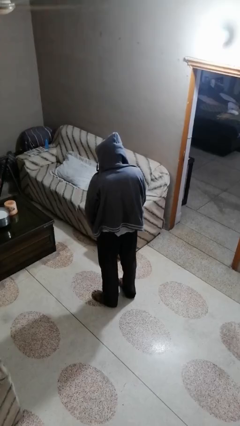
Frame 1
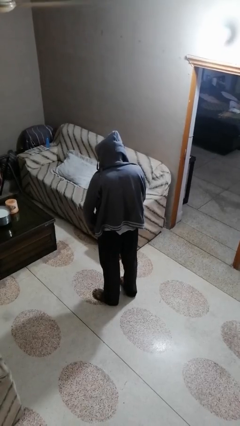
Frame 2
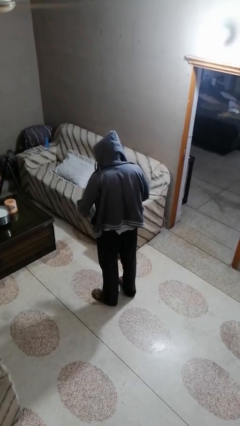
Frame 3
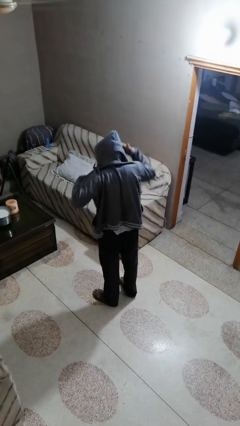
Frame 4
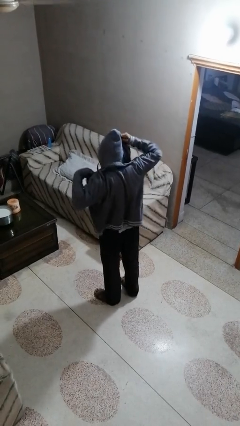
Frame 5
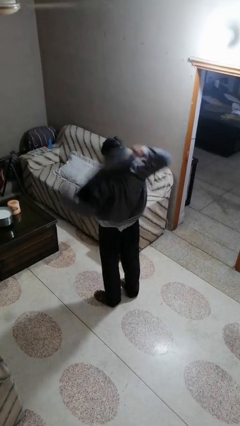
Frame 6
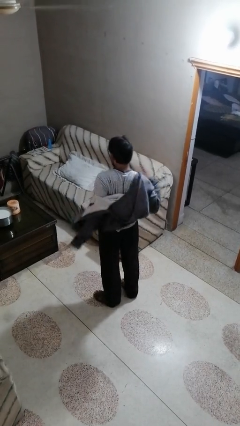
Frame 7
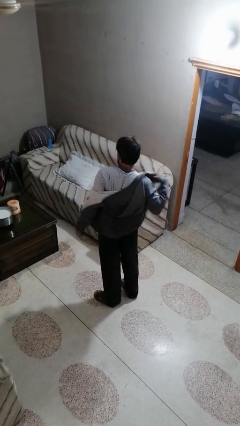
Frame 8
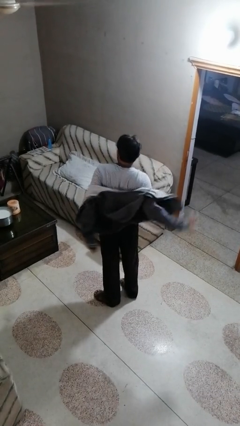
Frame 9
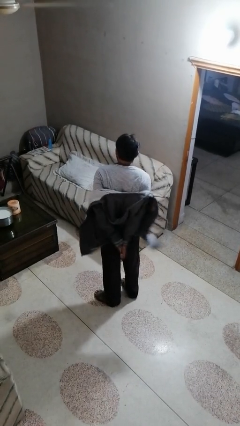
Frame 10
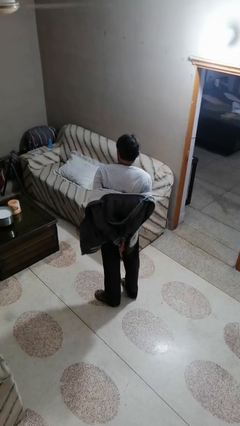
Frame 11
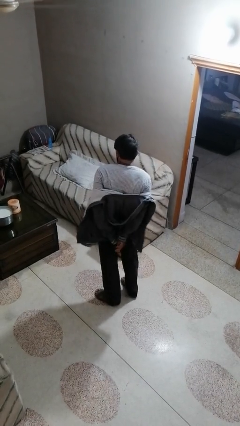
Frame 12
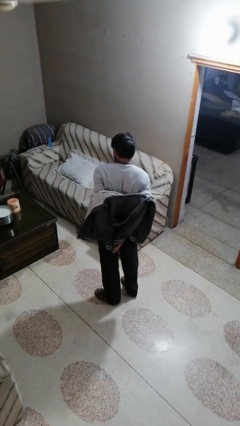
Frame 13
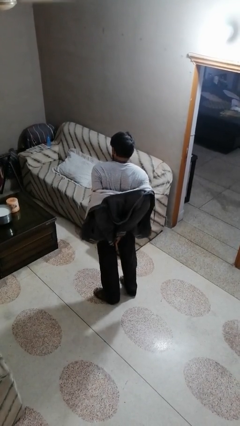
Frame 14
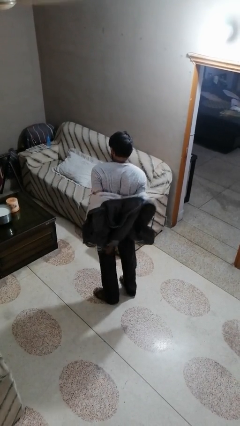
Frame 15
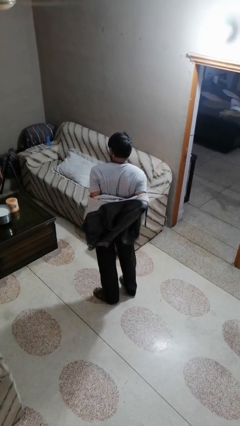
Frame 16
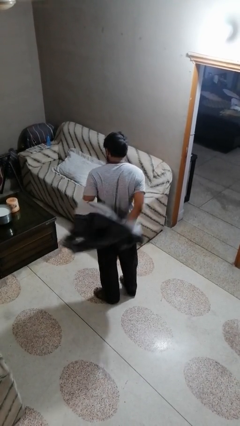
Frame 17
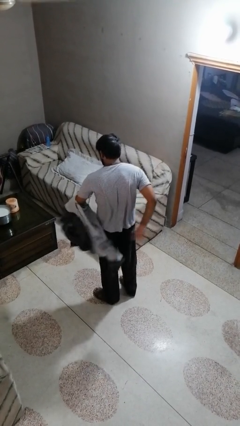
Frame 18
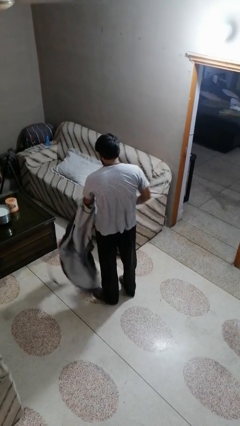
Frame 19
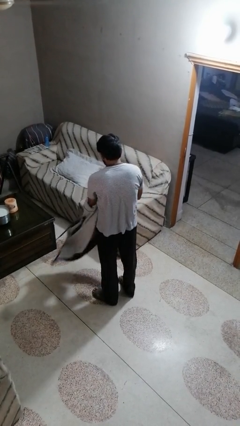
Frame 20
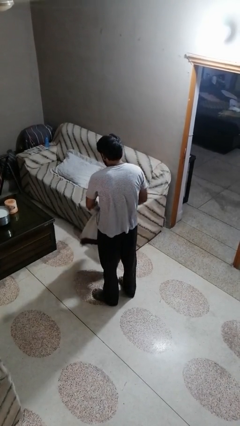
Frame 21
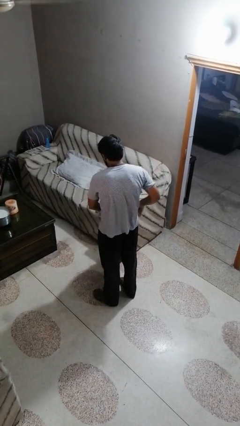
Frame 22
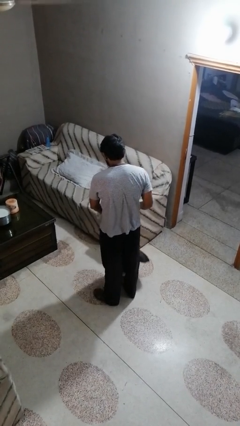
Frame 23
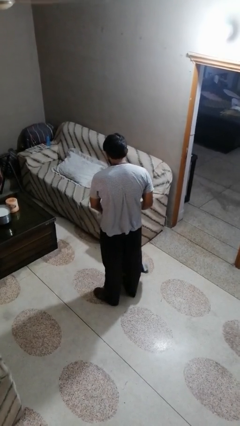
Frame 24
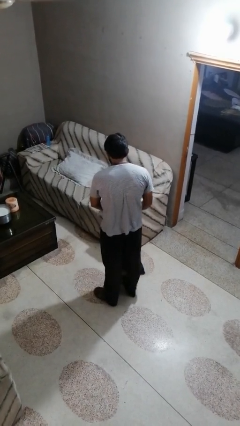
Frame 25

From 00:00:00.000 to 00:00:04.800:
person takes off hoodie

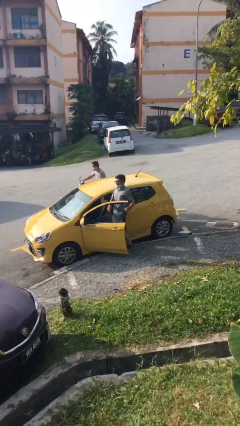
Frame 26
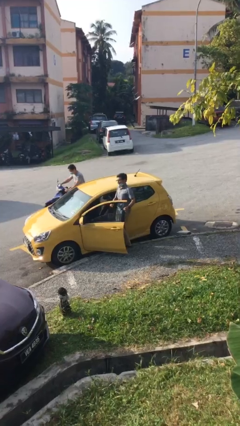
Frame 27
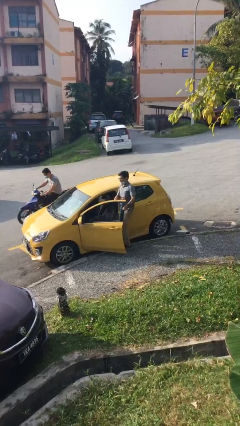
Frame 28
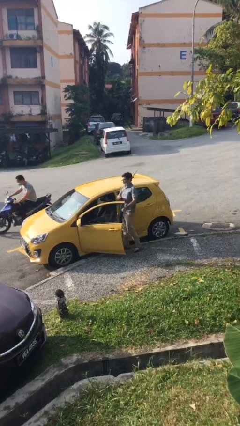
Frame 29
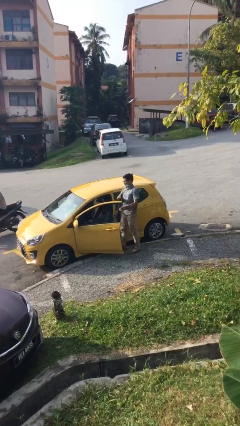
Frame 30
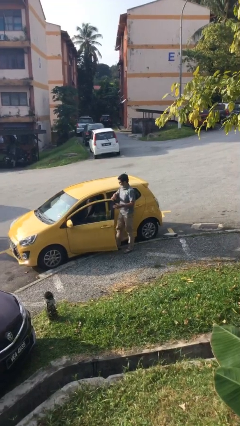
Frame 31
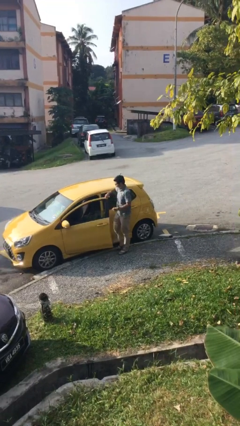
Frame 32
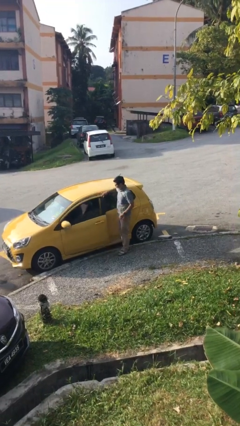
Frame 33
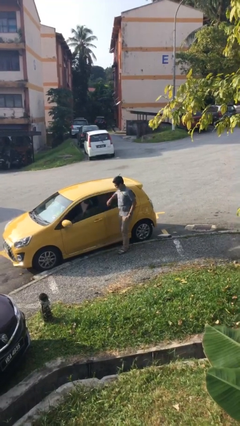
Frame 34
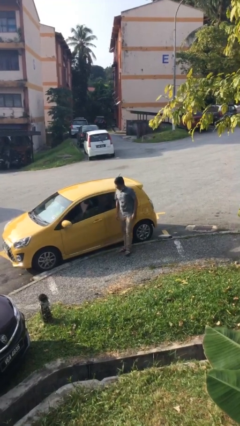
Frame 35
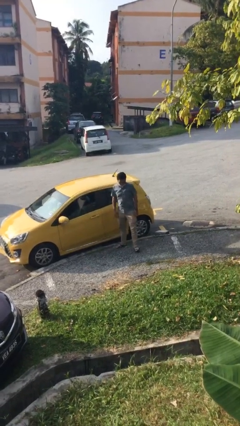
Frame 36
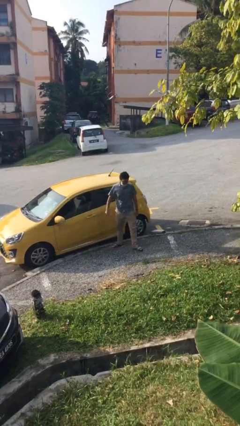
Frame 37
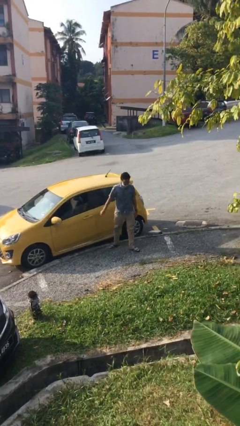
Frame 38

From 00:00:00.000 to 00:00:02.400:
person closes car door

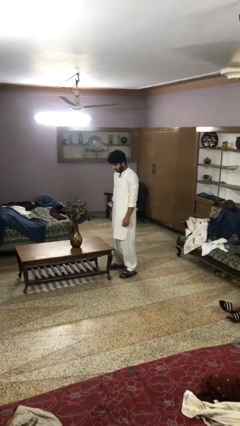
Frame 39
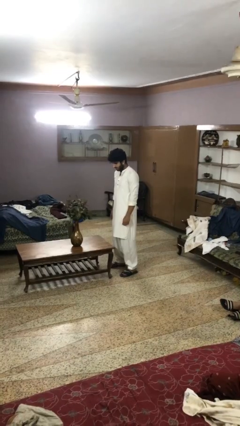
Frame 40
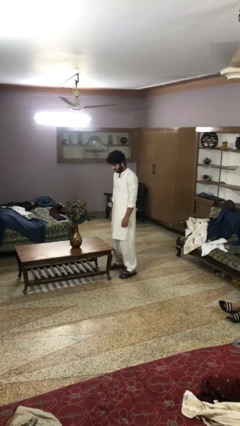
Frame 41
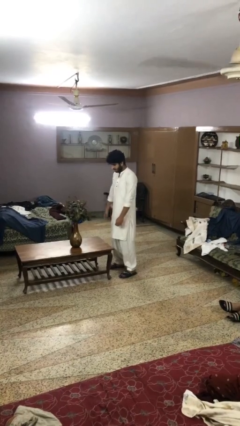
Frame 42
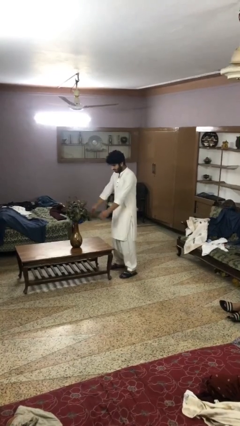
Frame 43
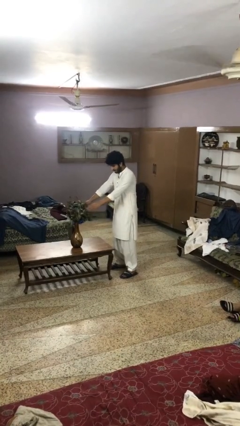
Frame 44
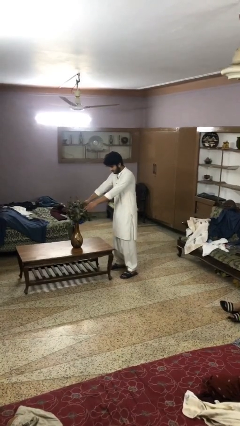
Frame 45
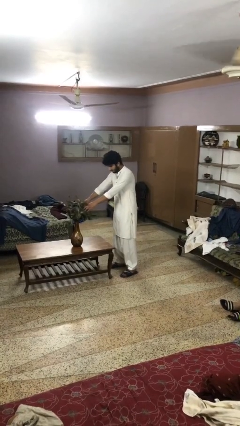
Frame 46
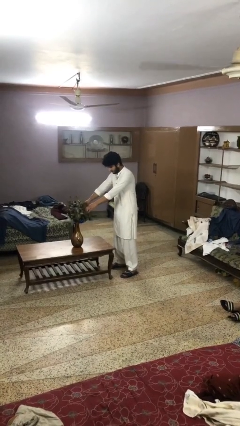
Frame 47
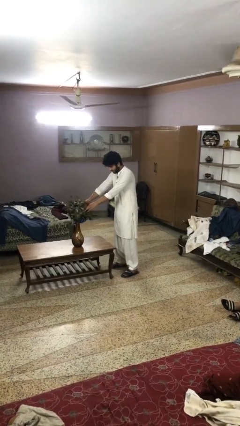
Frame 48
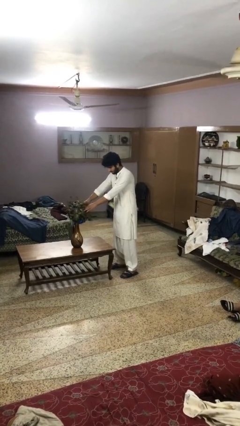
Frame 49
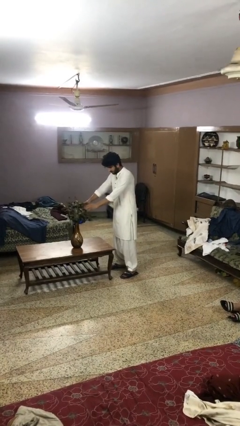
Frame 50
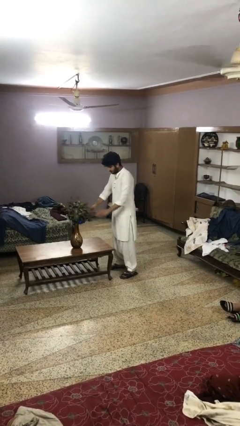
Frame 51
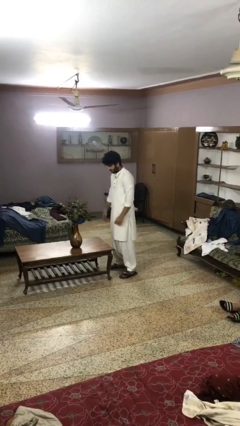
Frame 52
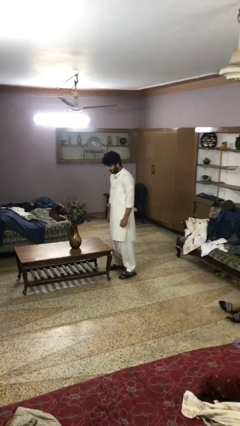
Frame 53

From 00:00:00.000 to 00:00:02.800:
person arranges flowers in vase

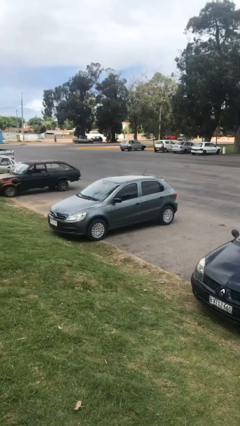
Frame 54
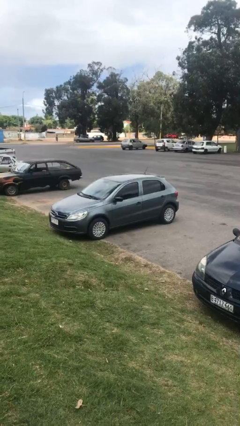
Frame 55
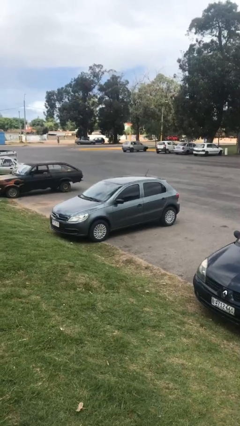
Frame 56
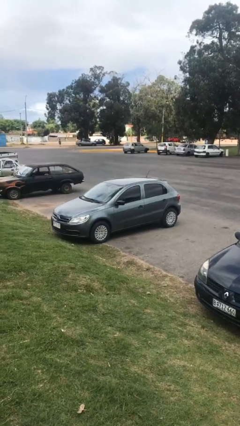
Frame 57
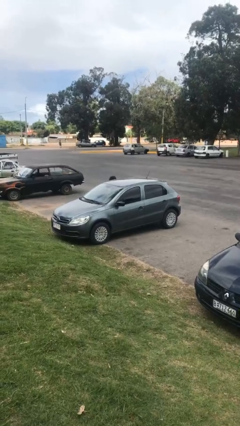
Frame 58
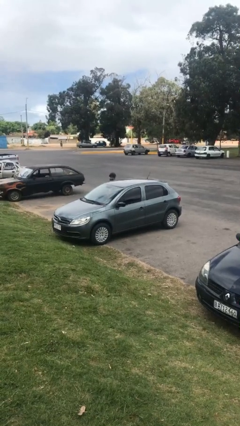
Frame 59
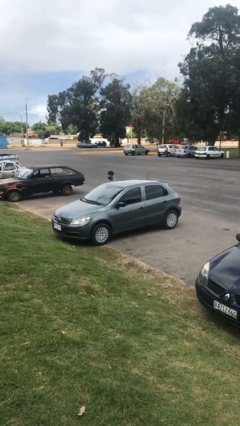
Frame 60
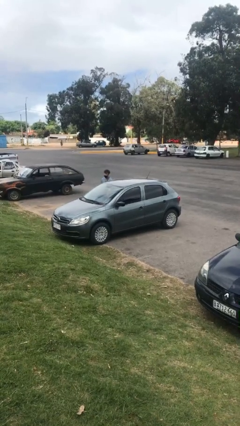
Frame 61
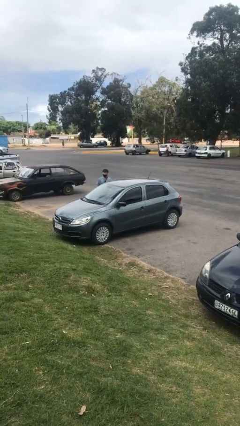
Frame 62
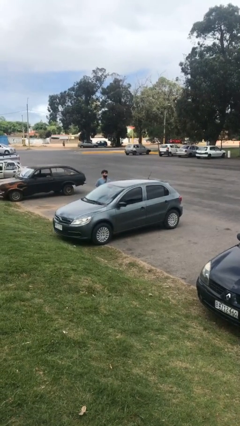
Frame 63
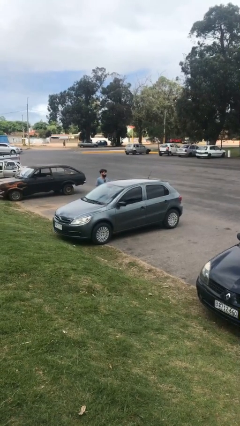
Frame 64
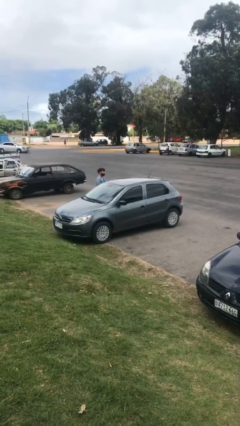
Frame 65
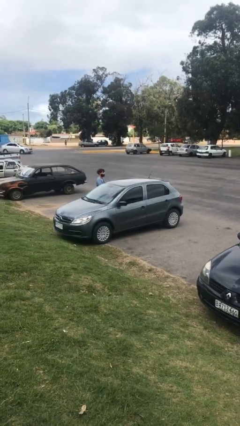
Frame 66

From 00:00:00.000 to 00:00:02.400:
car drops off person

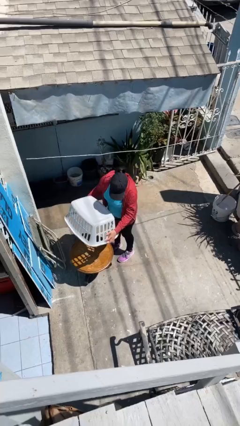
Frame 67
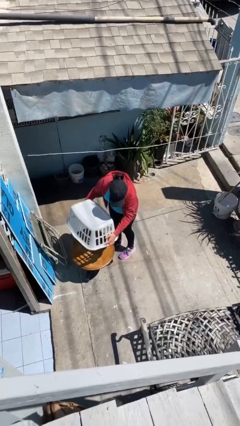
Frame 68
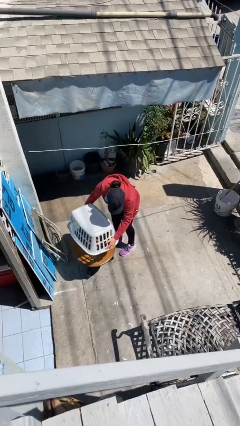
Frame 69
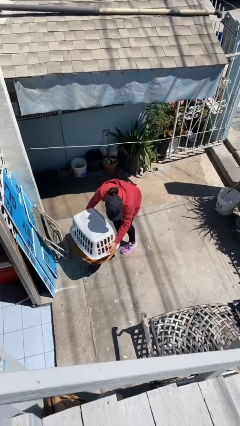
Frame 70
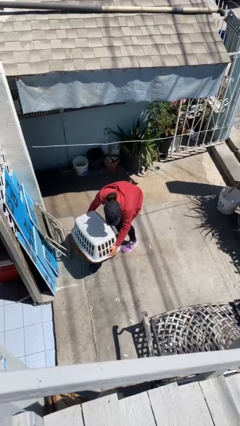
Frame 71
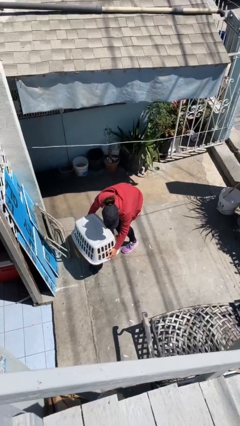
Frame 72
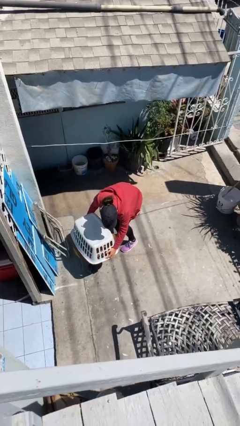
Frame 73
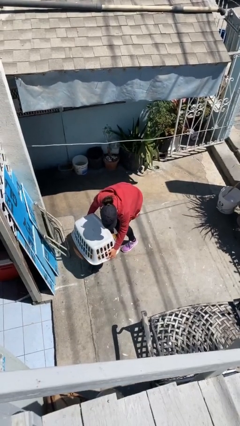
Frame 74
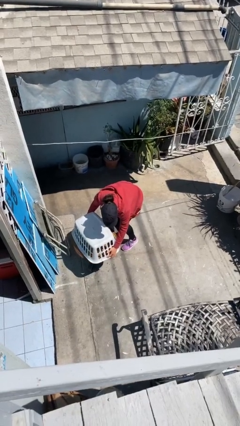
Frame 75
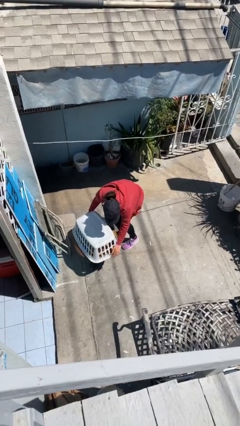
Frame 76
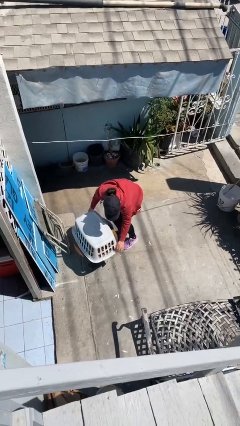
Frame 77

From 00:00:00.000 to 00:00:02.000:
person puts down object on table

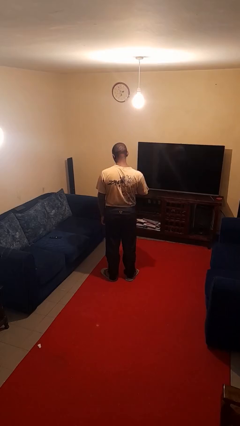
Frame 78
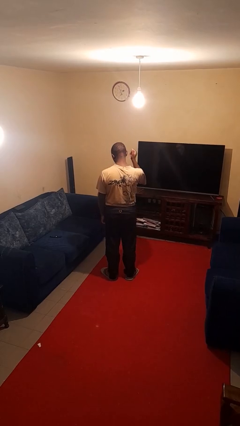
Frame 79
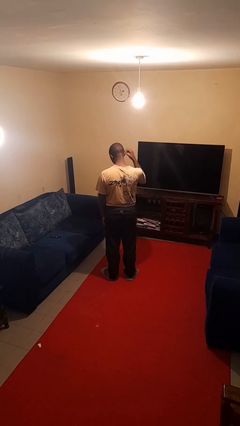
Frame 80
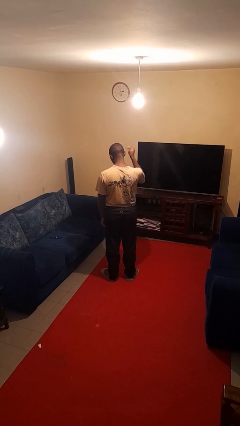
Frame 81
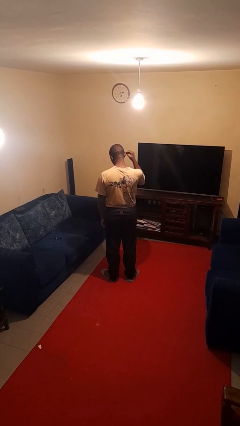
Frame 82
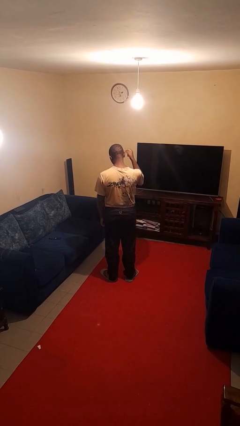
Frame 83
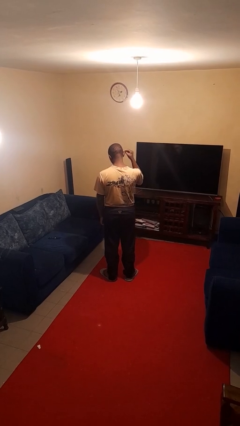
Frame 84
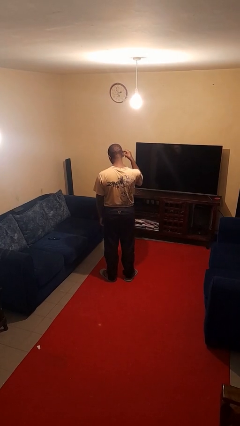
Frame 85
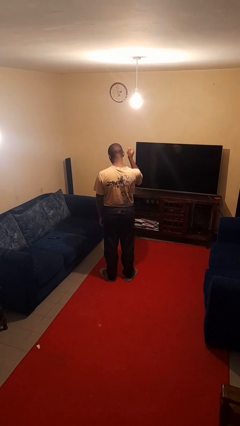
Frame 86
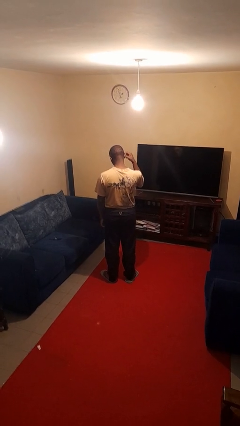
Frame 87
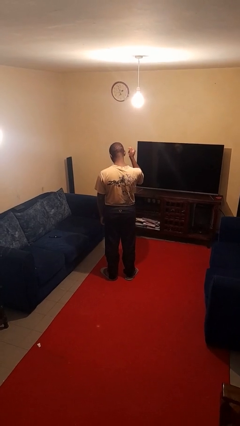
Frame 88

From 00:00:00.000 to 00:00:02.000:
person snaps fingers

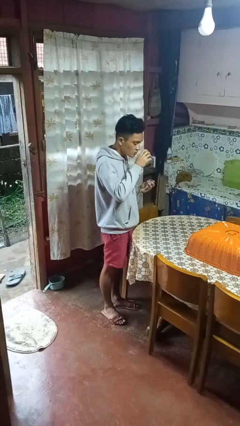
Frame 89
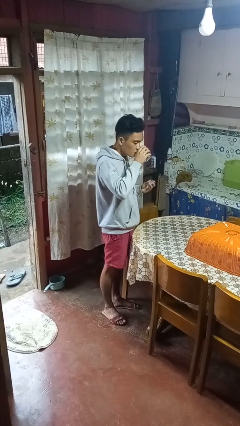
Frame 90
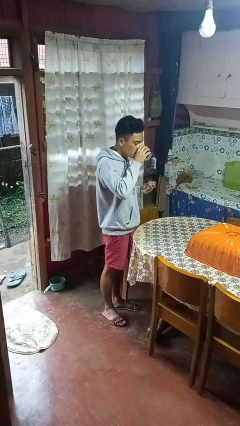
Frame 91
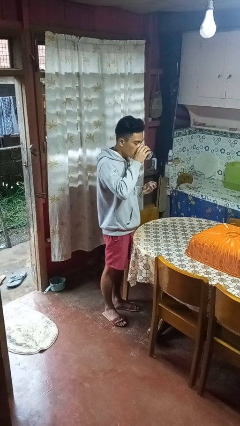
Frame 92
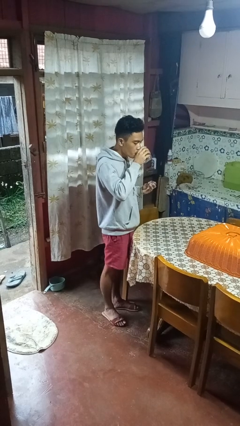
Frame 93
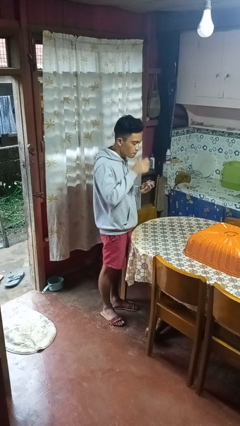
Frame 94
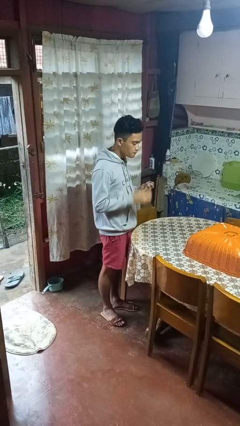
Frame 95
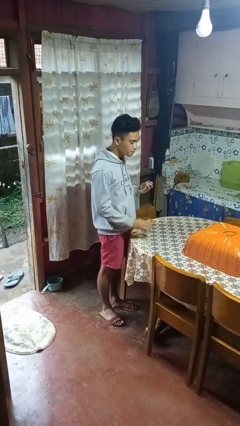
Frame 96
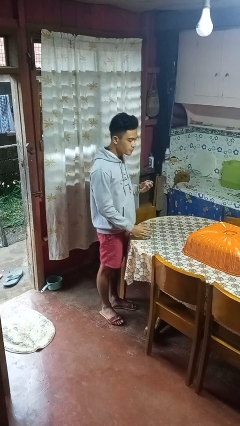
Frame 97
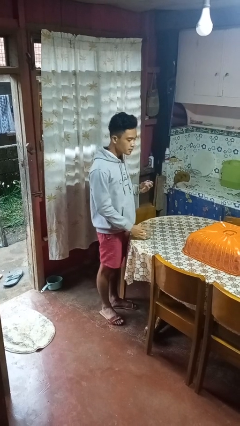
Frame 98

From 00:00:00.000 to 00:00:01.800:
person drinks from cup
